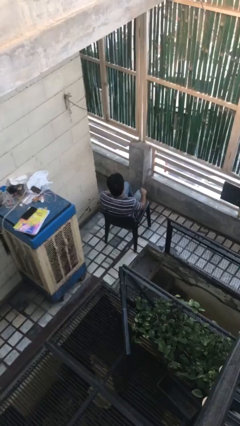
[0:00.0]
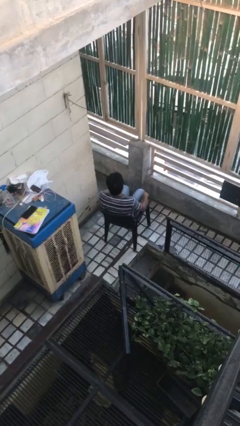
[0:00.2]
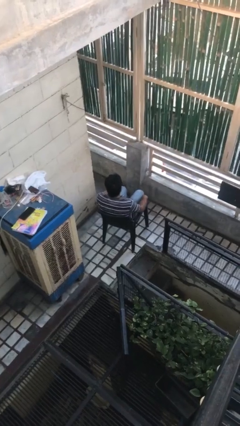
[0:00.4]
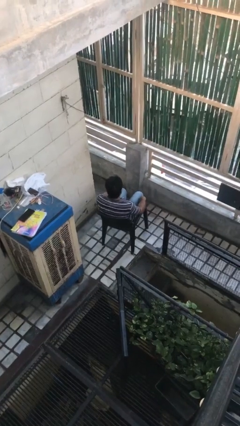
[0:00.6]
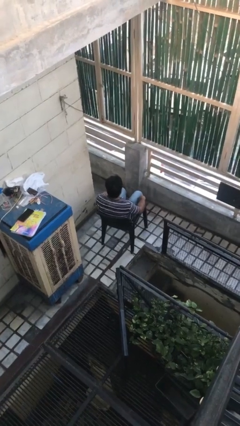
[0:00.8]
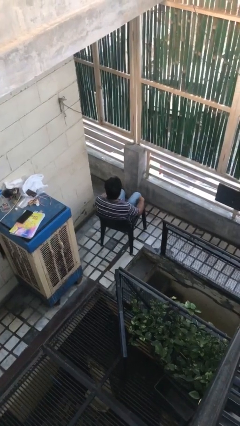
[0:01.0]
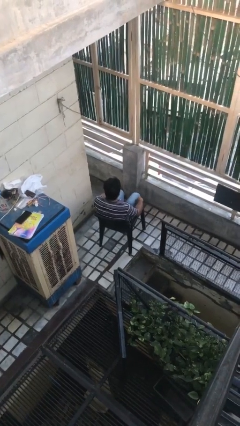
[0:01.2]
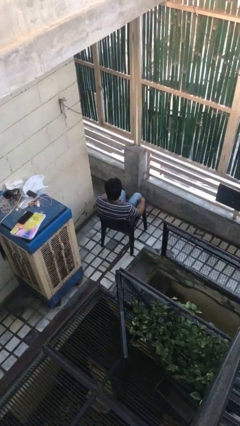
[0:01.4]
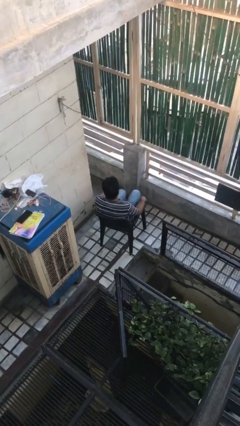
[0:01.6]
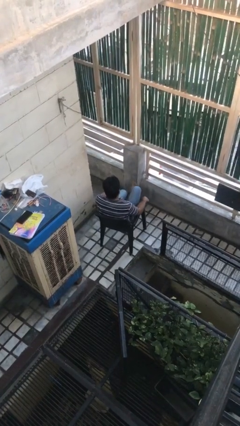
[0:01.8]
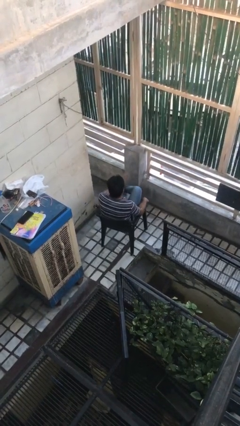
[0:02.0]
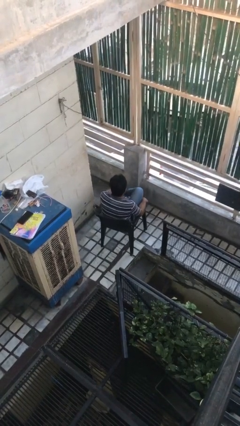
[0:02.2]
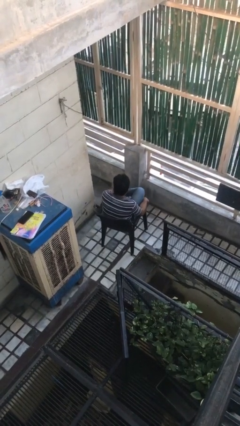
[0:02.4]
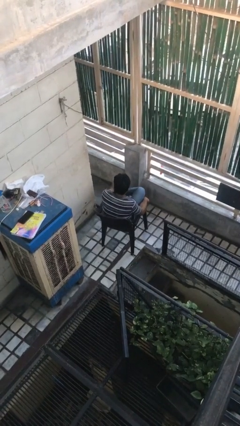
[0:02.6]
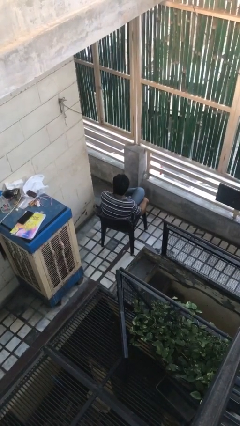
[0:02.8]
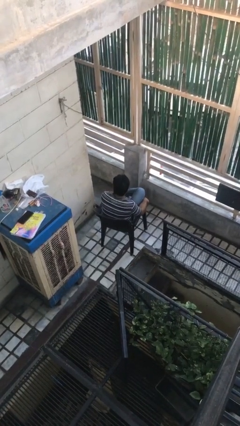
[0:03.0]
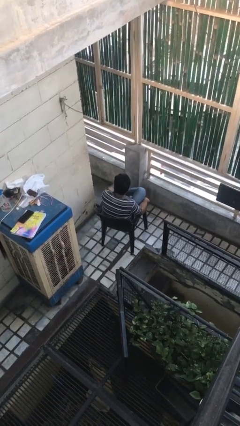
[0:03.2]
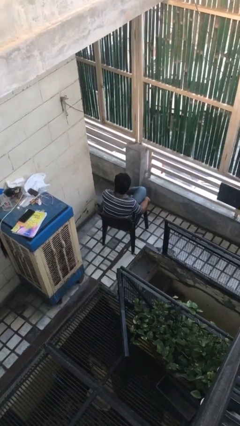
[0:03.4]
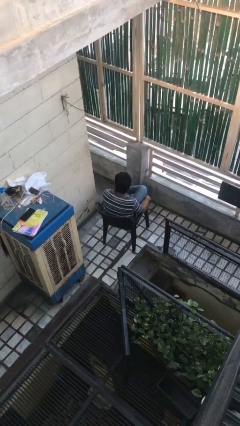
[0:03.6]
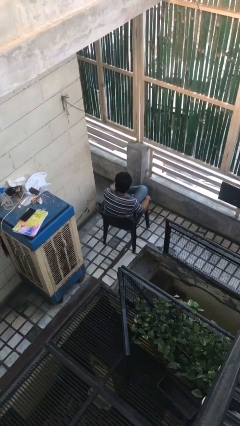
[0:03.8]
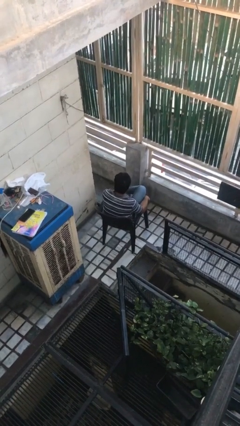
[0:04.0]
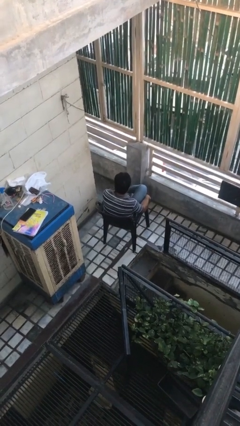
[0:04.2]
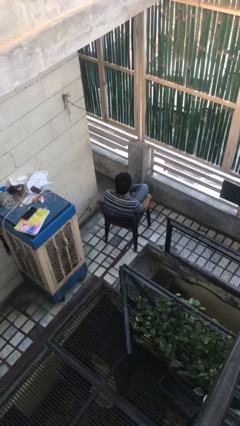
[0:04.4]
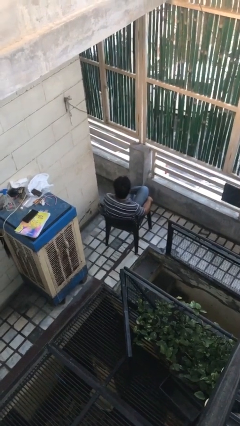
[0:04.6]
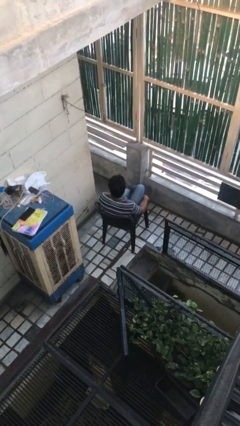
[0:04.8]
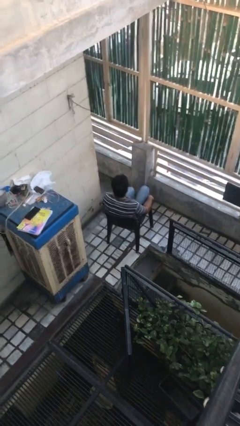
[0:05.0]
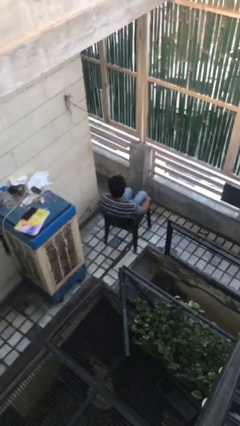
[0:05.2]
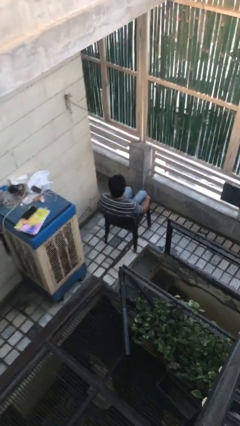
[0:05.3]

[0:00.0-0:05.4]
person rubs foot

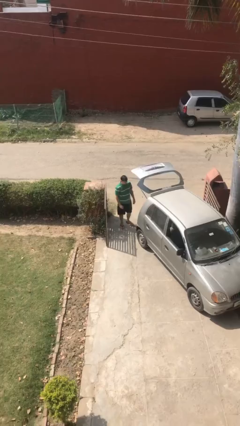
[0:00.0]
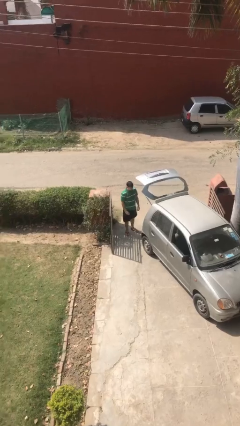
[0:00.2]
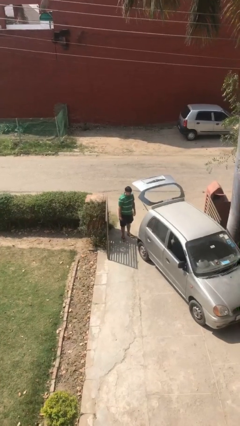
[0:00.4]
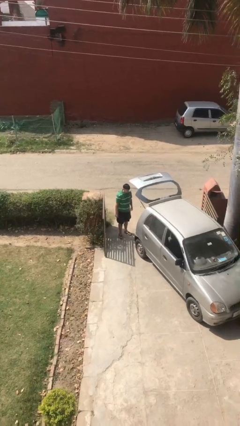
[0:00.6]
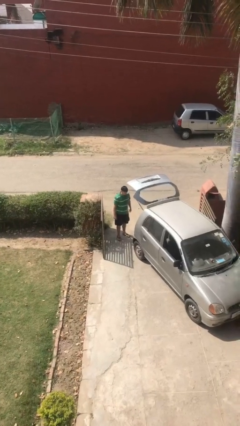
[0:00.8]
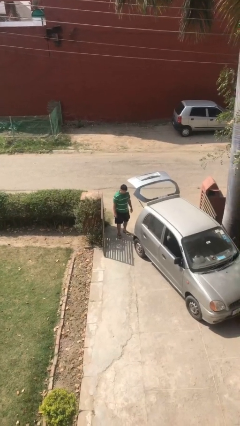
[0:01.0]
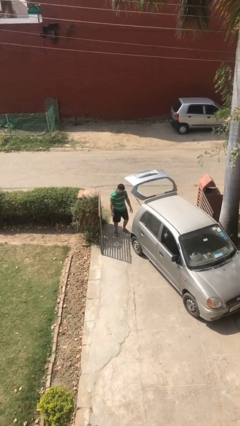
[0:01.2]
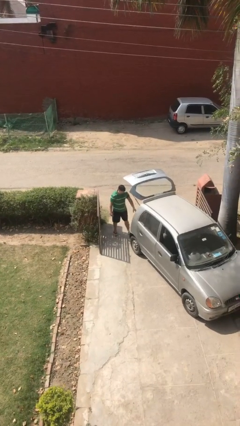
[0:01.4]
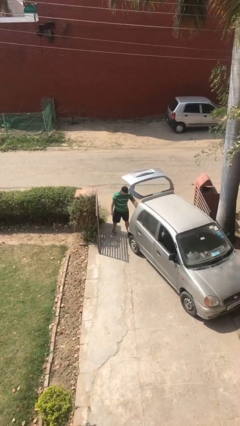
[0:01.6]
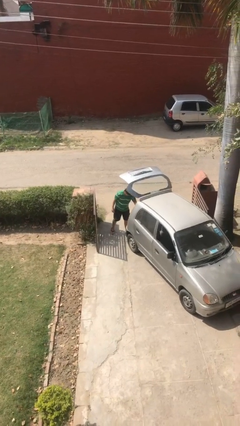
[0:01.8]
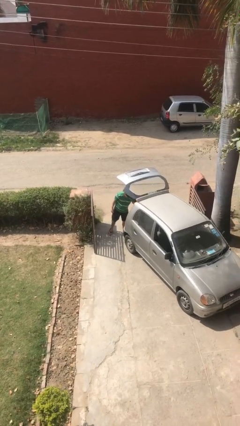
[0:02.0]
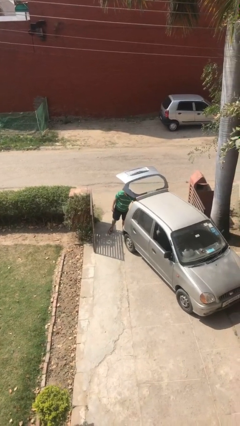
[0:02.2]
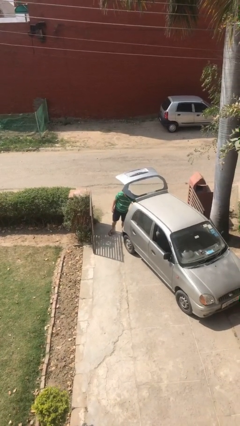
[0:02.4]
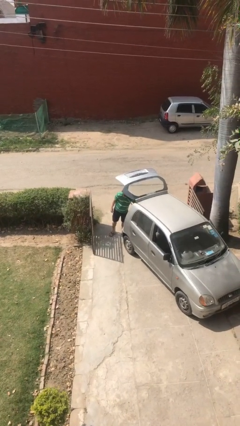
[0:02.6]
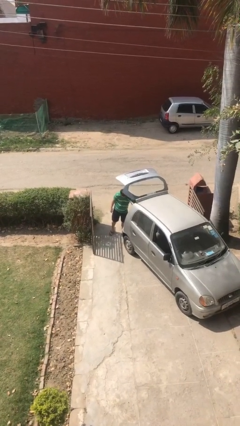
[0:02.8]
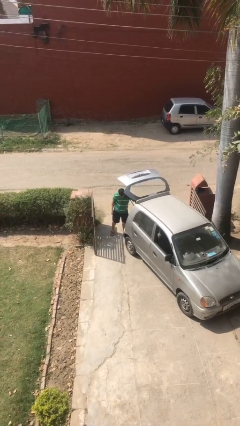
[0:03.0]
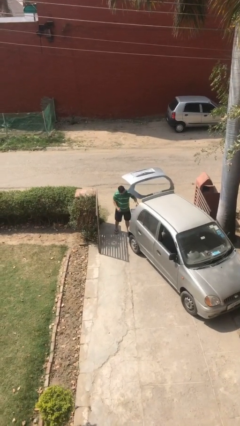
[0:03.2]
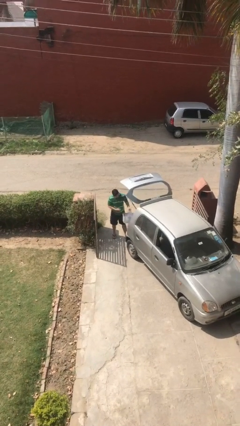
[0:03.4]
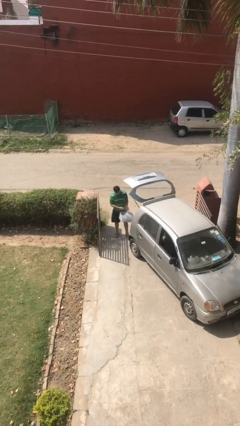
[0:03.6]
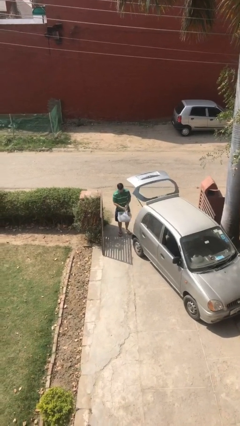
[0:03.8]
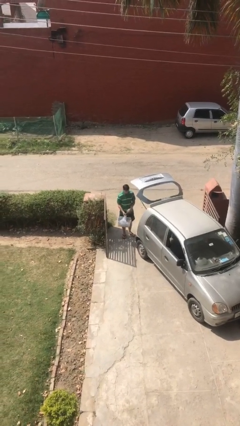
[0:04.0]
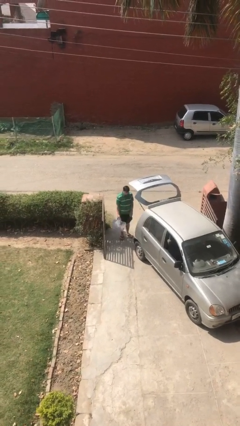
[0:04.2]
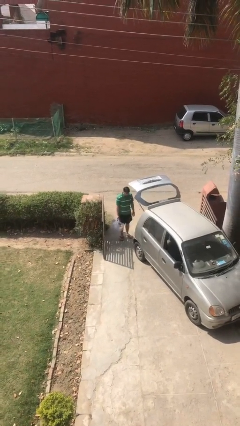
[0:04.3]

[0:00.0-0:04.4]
person unloads car

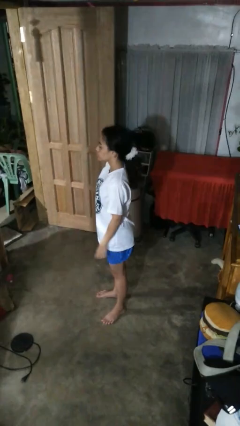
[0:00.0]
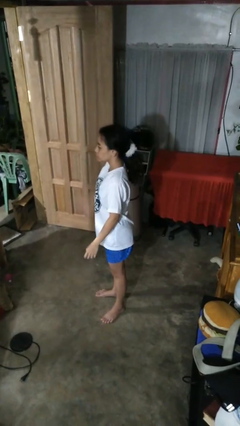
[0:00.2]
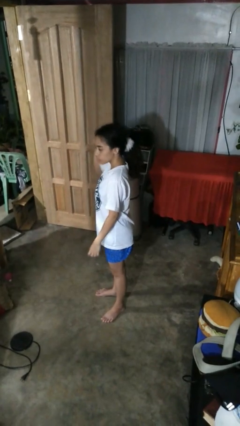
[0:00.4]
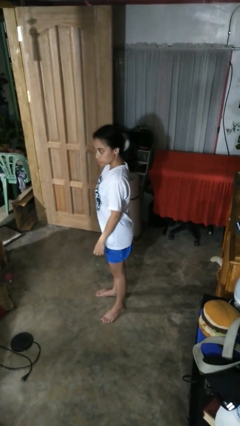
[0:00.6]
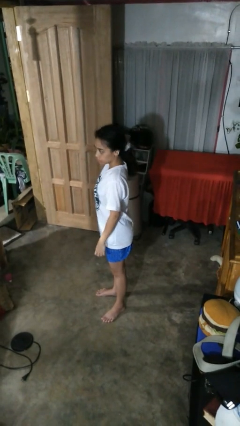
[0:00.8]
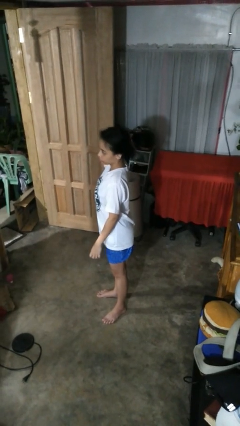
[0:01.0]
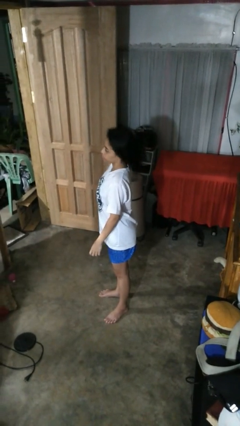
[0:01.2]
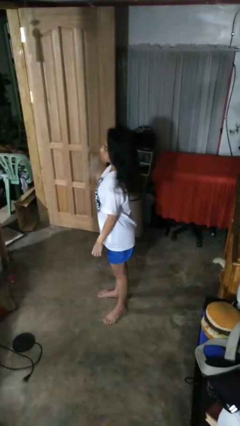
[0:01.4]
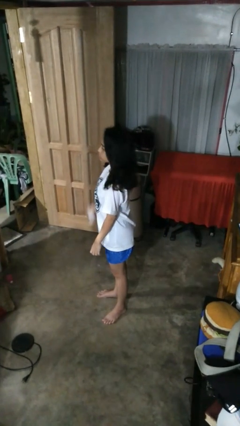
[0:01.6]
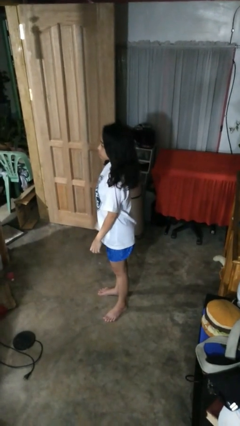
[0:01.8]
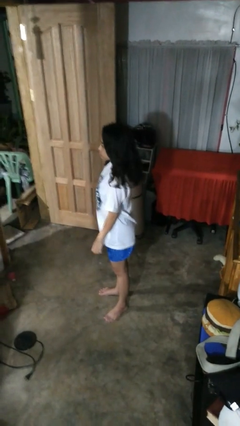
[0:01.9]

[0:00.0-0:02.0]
person takes off hairtie

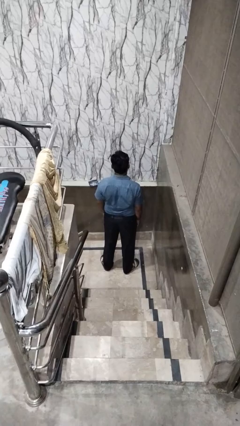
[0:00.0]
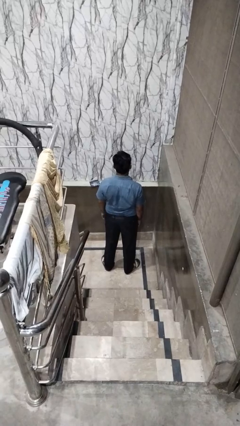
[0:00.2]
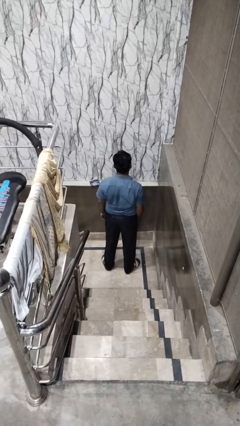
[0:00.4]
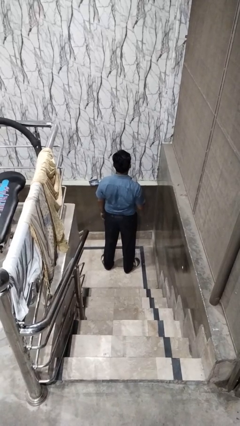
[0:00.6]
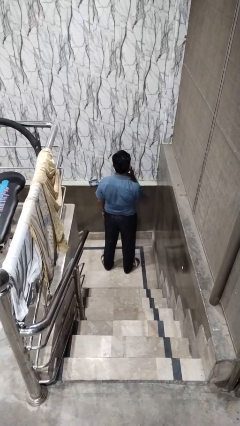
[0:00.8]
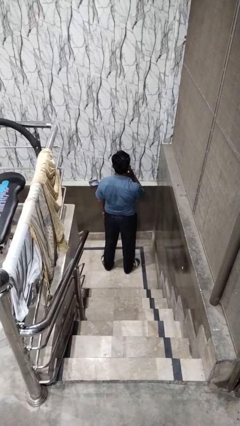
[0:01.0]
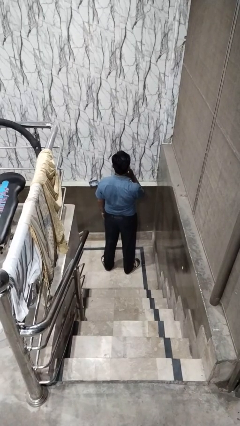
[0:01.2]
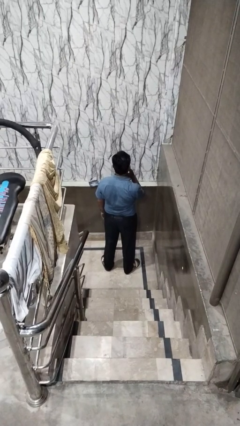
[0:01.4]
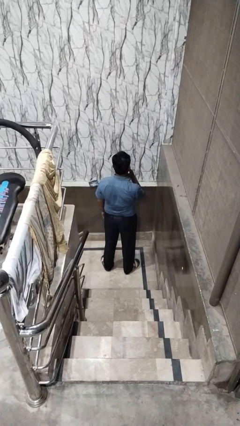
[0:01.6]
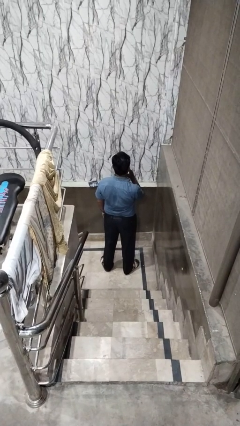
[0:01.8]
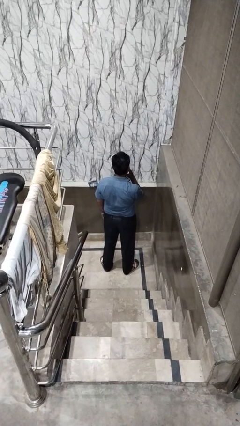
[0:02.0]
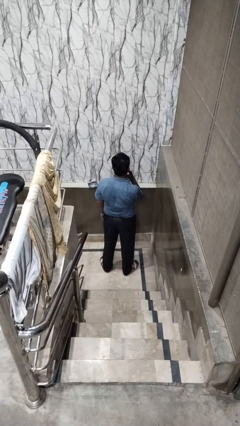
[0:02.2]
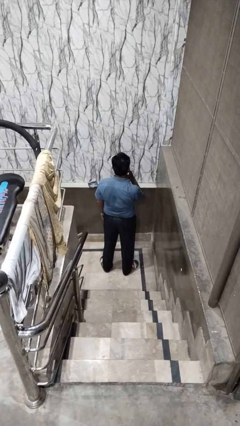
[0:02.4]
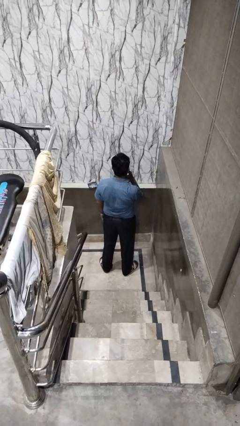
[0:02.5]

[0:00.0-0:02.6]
person strokes chin

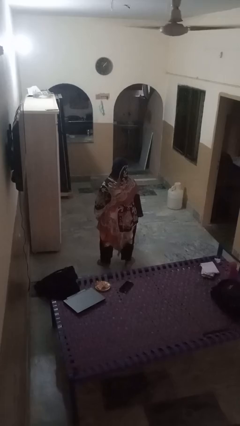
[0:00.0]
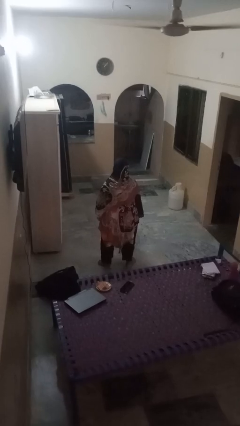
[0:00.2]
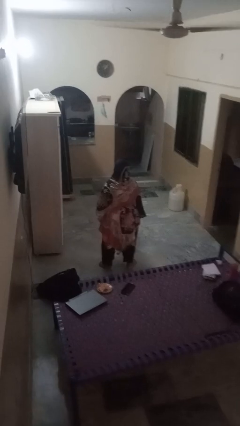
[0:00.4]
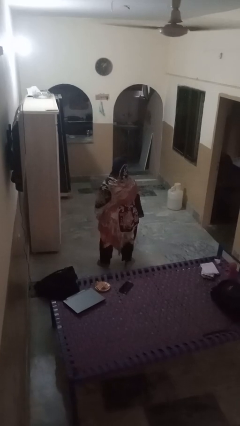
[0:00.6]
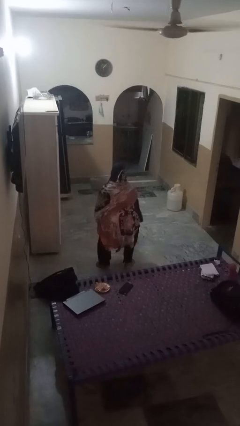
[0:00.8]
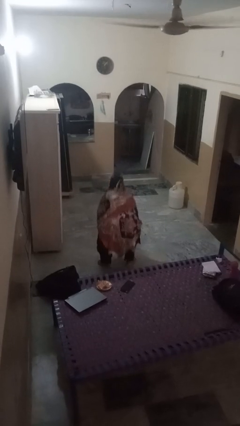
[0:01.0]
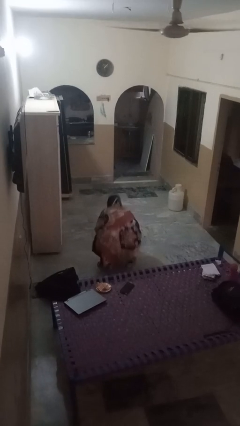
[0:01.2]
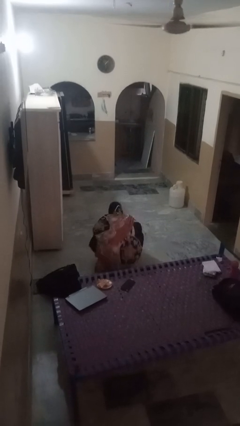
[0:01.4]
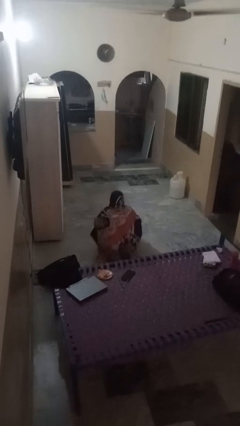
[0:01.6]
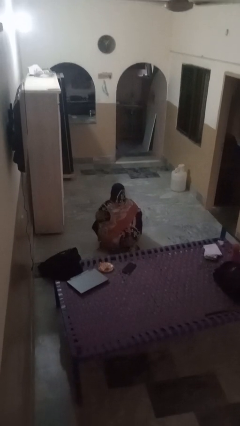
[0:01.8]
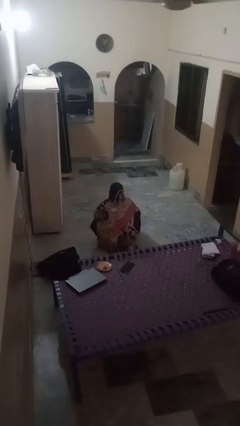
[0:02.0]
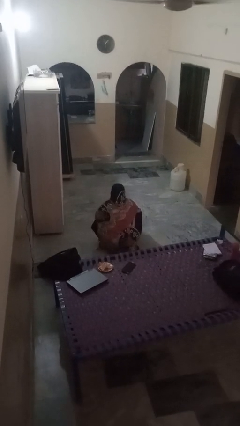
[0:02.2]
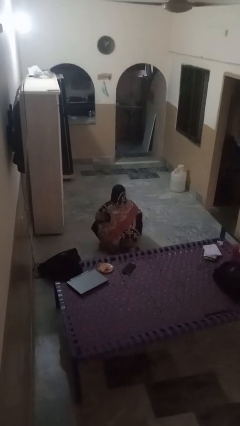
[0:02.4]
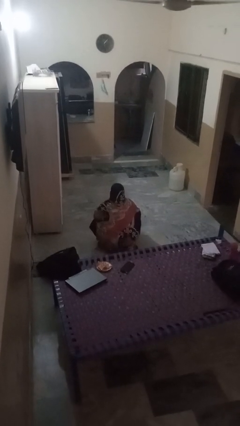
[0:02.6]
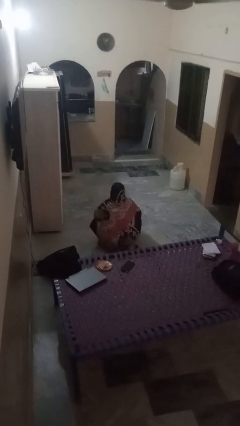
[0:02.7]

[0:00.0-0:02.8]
person squats

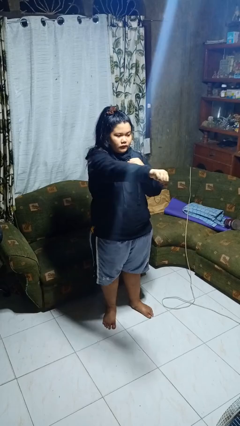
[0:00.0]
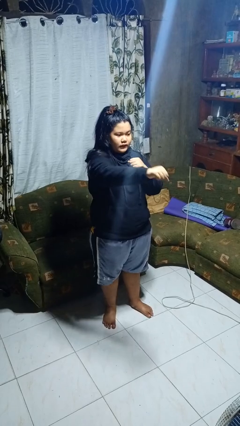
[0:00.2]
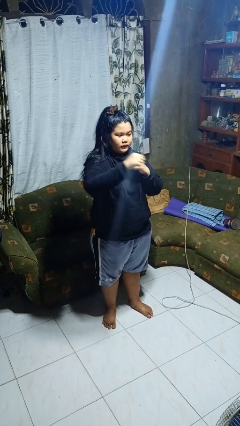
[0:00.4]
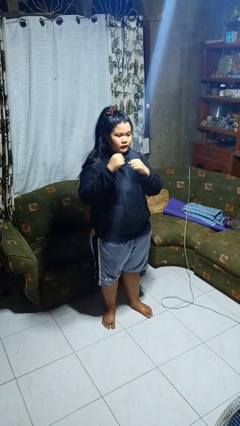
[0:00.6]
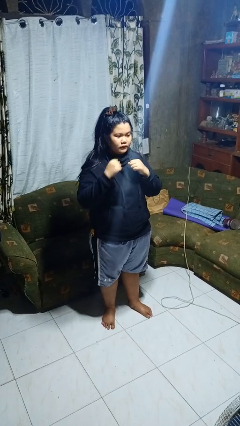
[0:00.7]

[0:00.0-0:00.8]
person punches
